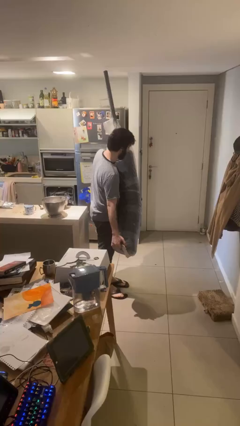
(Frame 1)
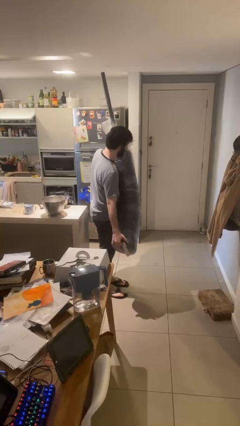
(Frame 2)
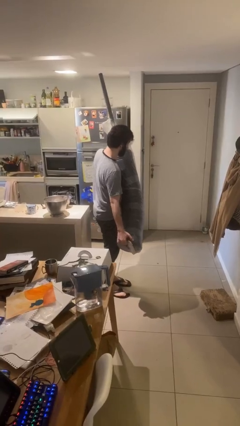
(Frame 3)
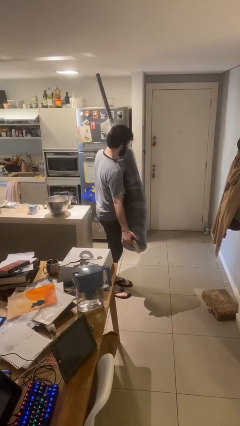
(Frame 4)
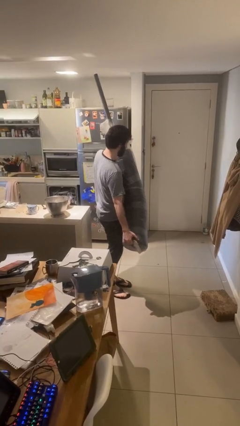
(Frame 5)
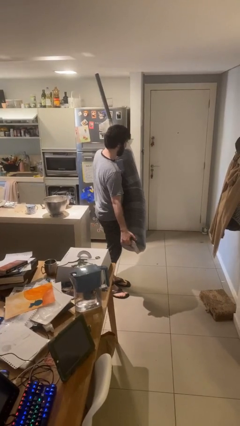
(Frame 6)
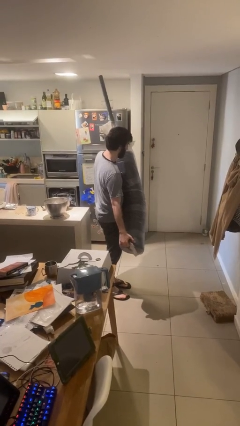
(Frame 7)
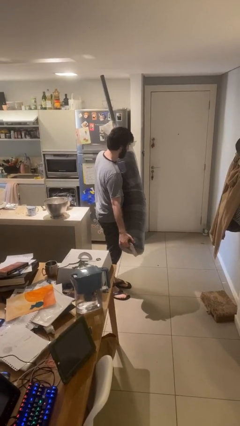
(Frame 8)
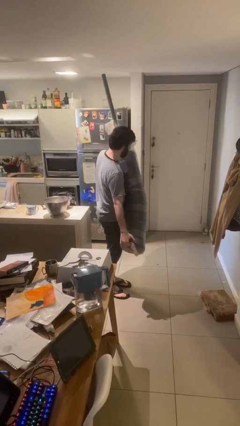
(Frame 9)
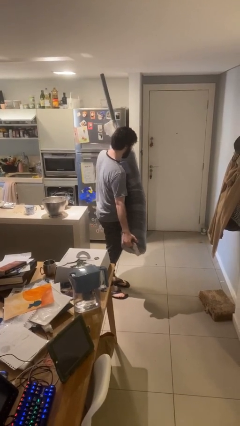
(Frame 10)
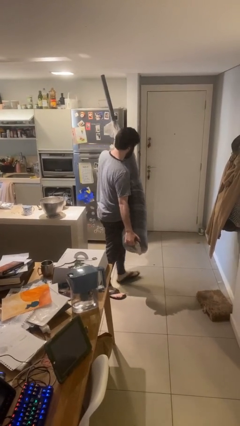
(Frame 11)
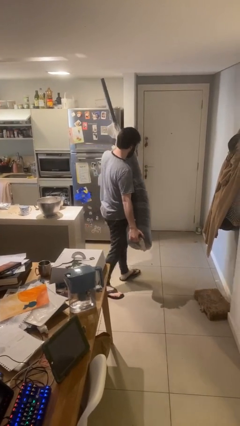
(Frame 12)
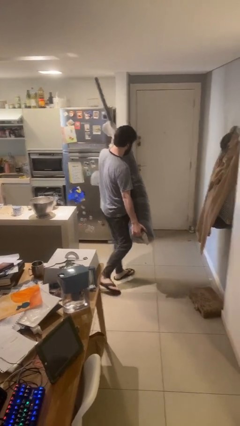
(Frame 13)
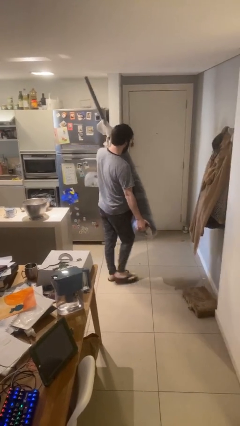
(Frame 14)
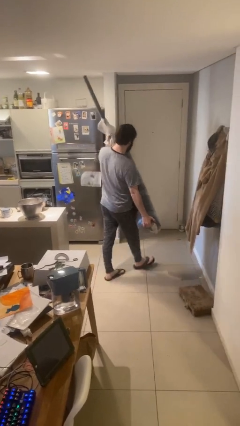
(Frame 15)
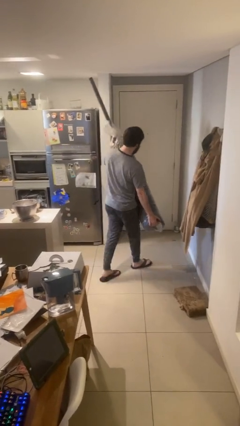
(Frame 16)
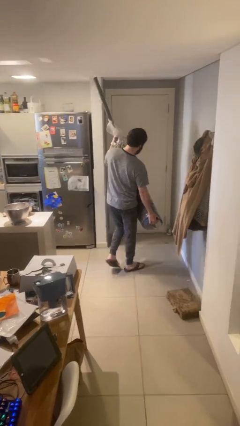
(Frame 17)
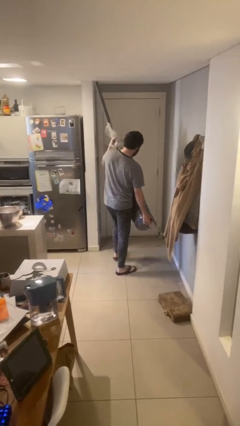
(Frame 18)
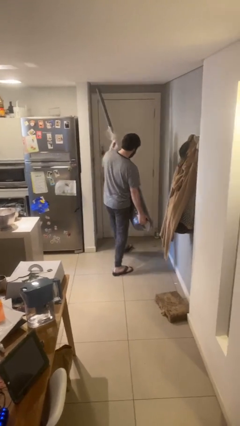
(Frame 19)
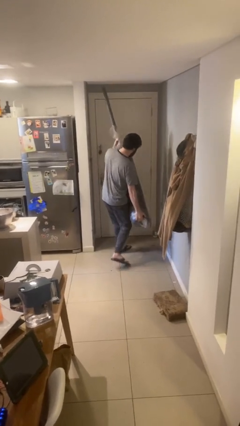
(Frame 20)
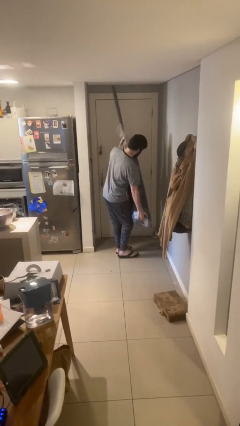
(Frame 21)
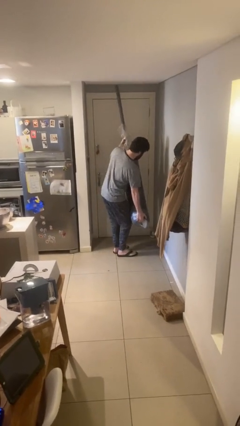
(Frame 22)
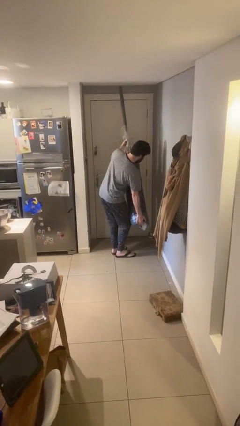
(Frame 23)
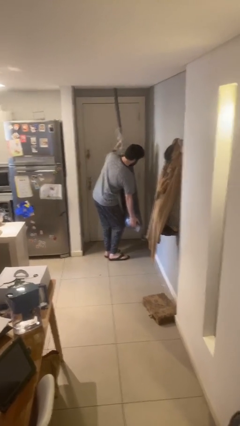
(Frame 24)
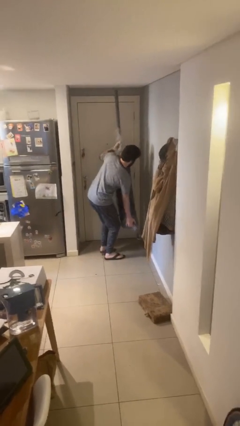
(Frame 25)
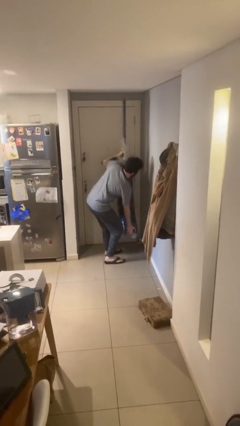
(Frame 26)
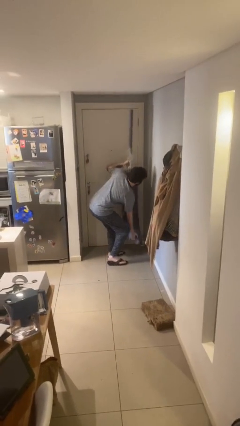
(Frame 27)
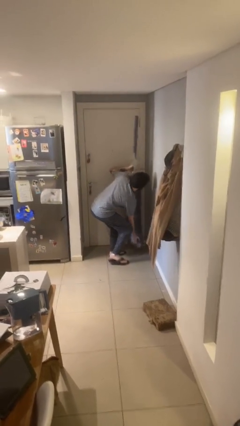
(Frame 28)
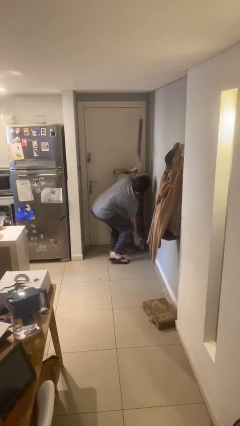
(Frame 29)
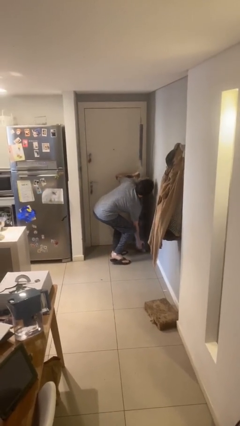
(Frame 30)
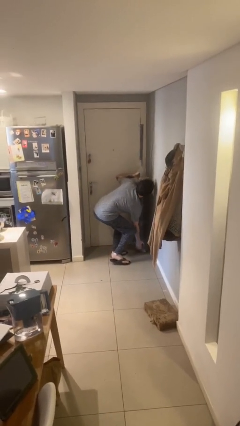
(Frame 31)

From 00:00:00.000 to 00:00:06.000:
person carries heavy object

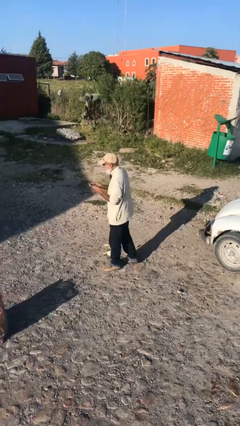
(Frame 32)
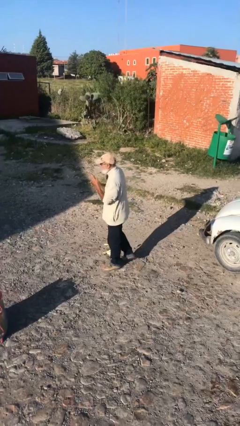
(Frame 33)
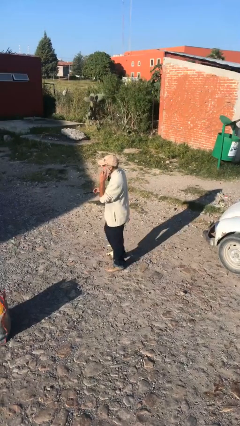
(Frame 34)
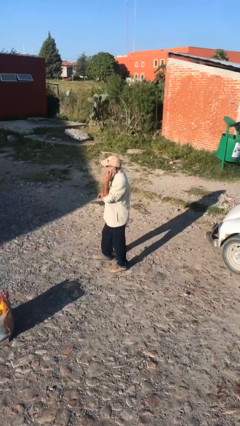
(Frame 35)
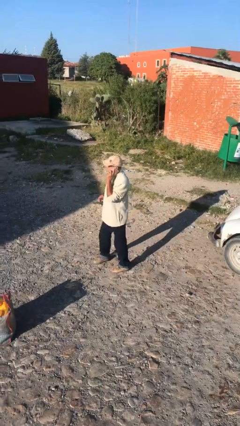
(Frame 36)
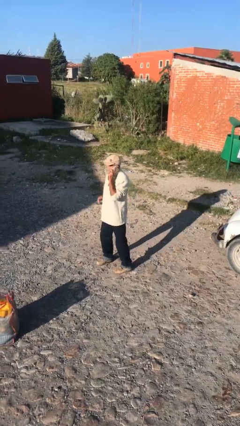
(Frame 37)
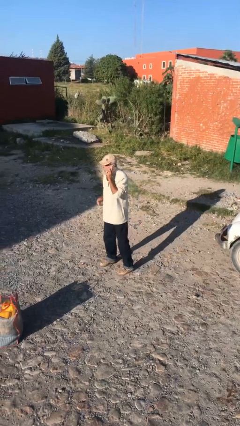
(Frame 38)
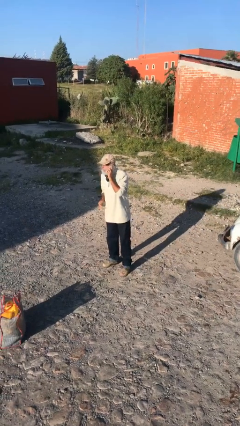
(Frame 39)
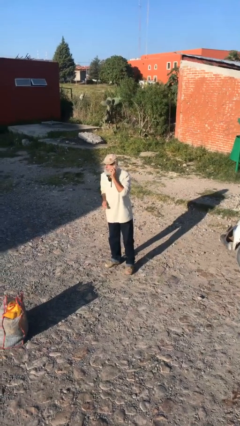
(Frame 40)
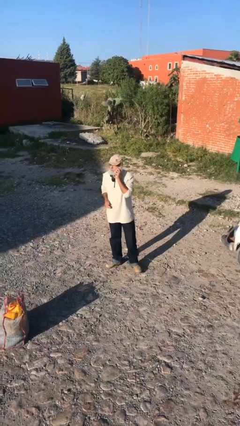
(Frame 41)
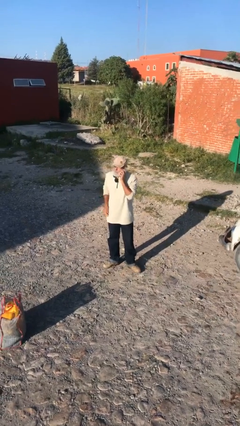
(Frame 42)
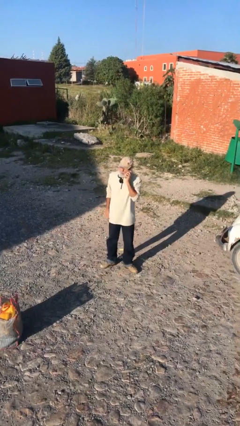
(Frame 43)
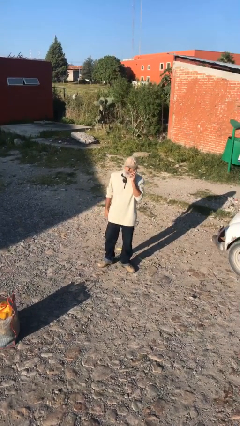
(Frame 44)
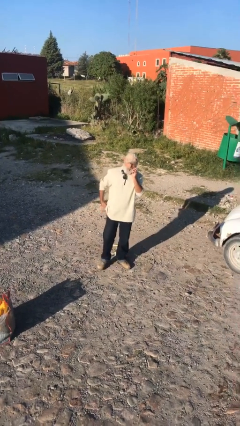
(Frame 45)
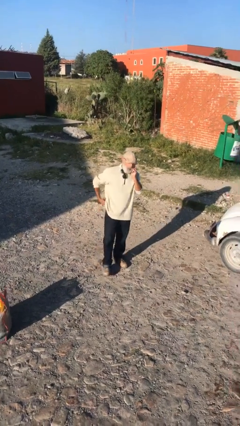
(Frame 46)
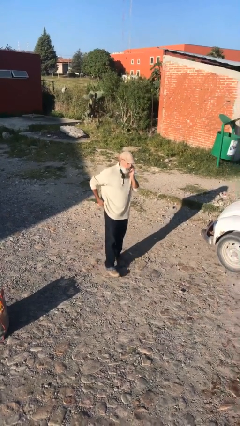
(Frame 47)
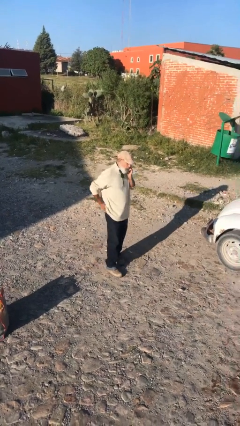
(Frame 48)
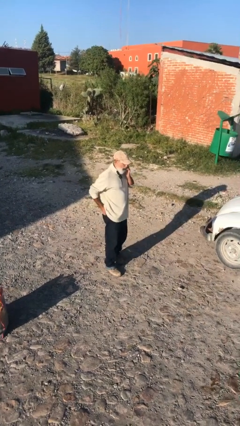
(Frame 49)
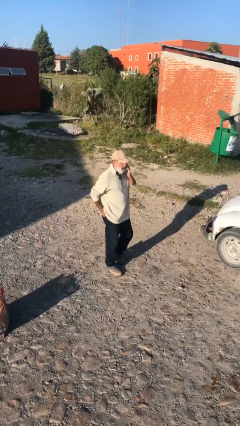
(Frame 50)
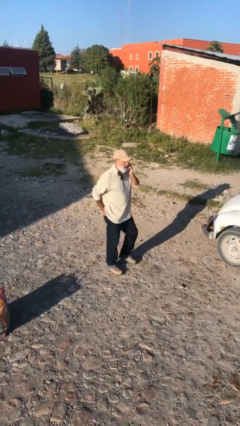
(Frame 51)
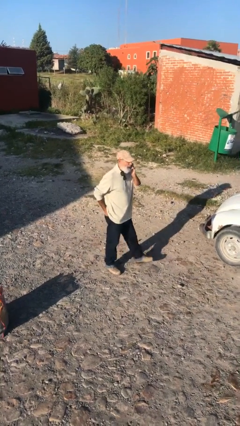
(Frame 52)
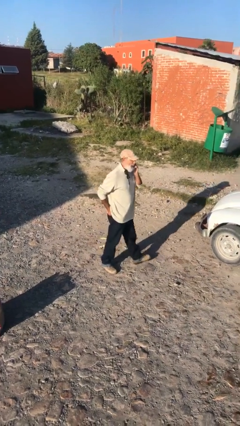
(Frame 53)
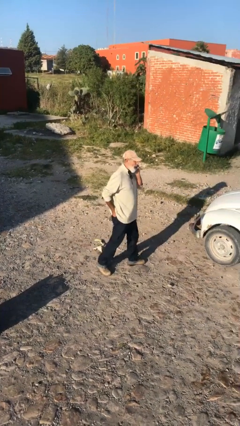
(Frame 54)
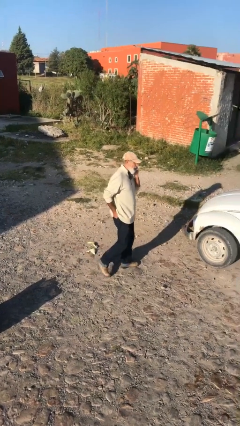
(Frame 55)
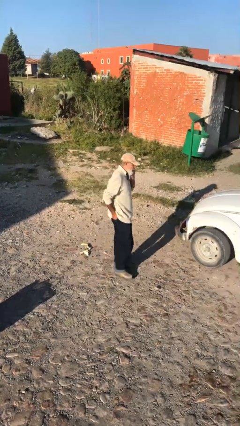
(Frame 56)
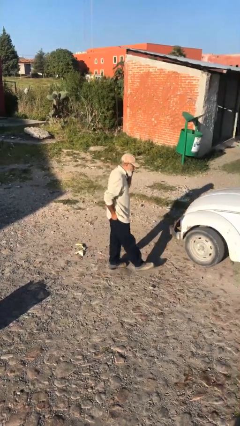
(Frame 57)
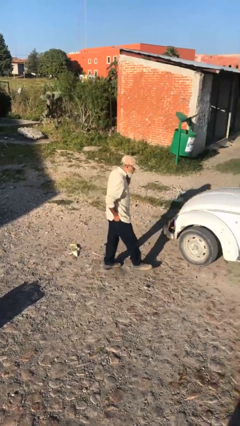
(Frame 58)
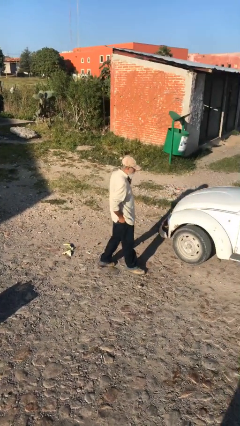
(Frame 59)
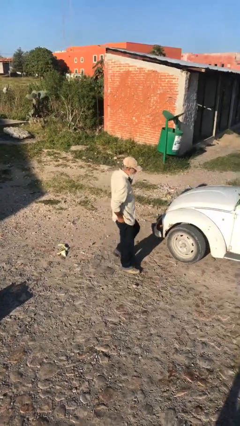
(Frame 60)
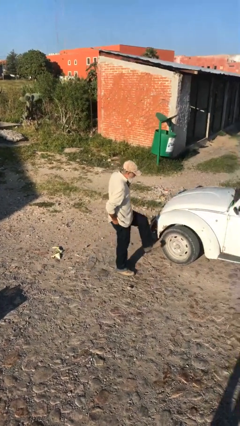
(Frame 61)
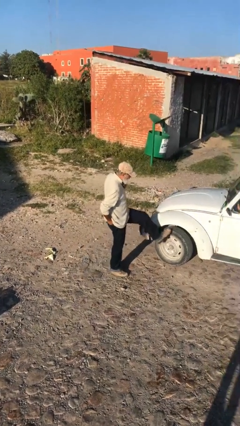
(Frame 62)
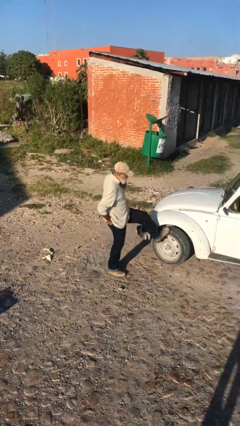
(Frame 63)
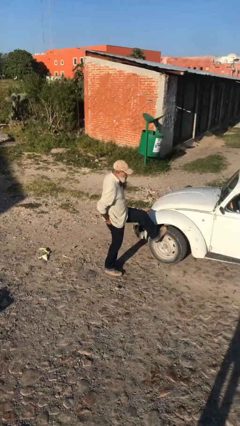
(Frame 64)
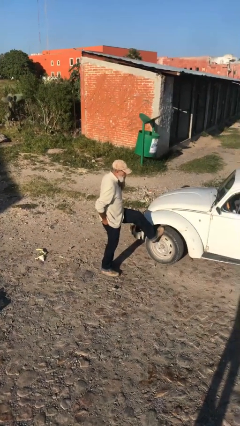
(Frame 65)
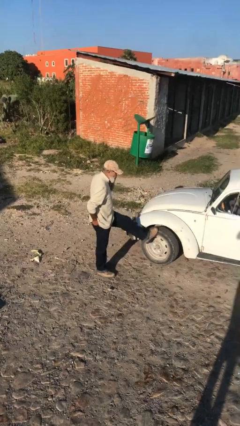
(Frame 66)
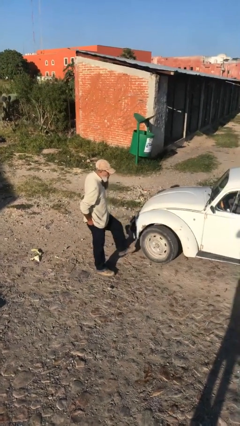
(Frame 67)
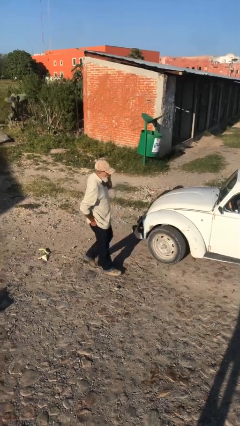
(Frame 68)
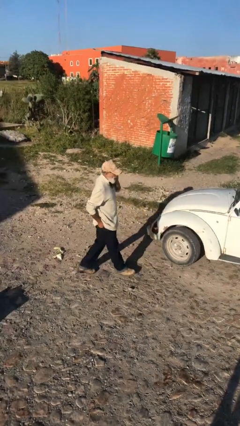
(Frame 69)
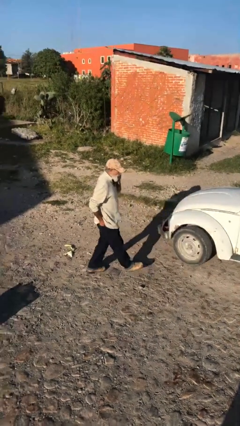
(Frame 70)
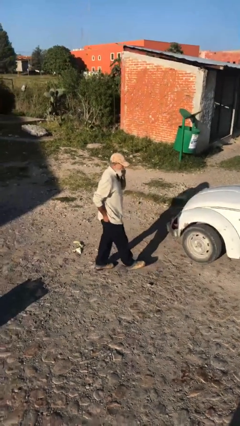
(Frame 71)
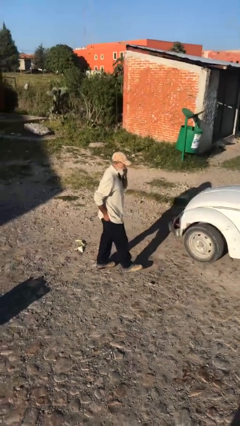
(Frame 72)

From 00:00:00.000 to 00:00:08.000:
person talks on phone

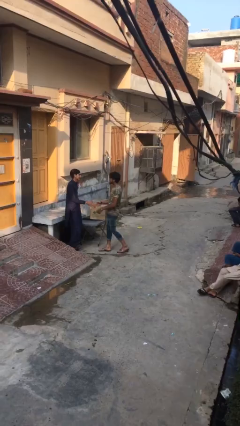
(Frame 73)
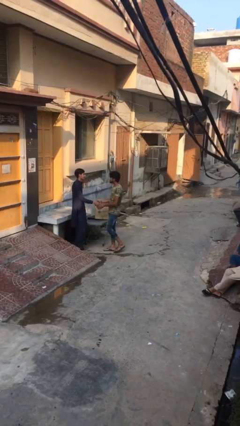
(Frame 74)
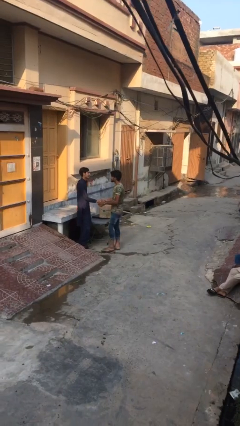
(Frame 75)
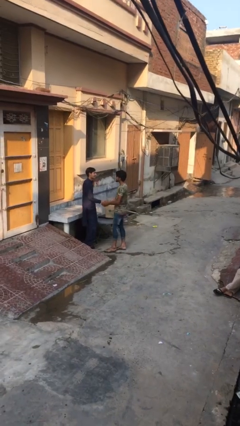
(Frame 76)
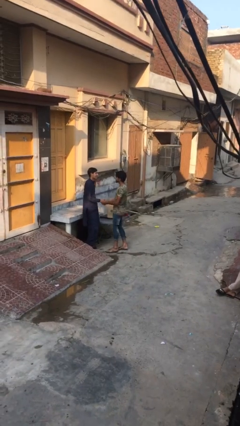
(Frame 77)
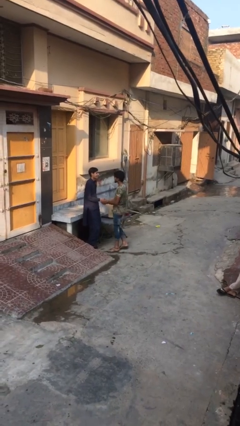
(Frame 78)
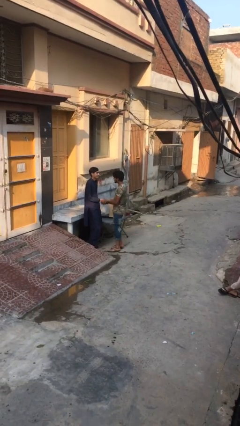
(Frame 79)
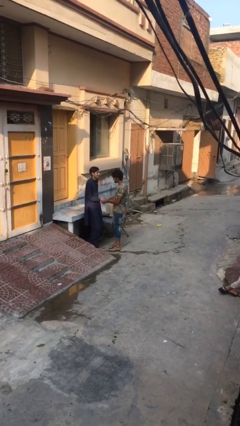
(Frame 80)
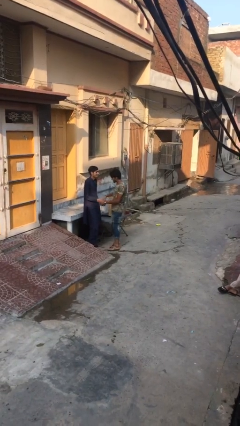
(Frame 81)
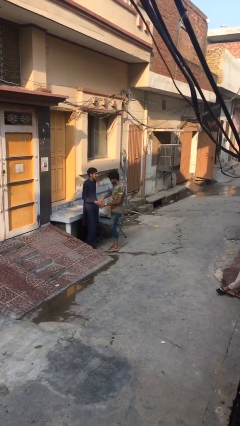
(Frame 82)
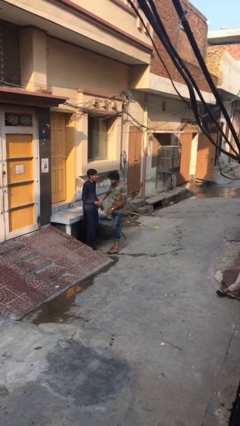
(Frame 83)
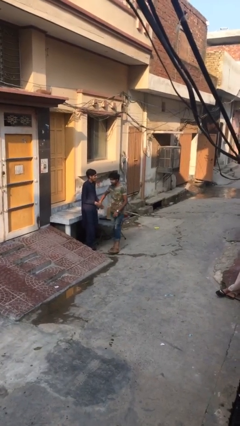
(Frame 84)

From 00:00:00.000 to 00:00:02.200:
person shakes hand

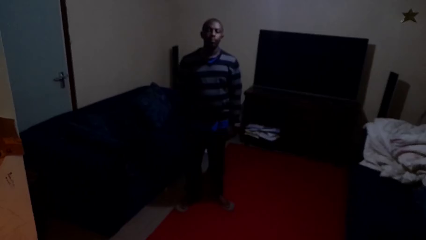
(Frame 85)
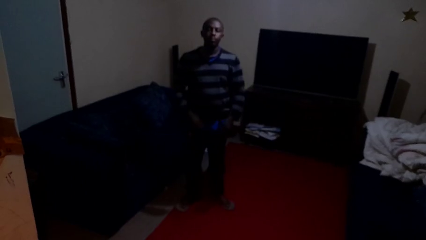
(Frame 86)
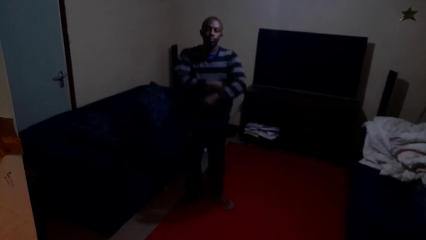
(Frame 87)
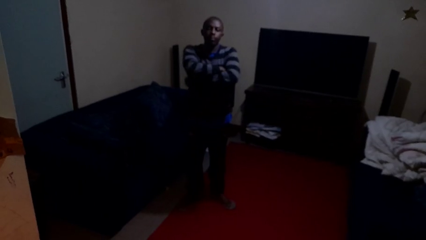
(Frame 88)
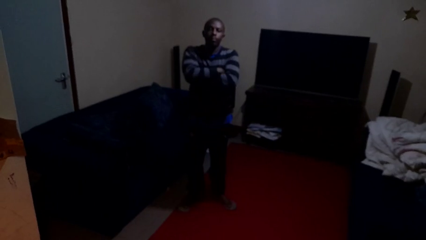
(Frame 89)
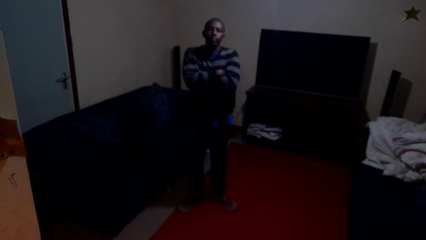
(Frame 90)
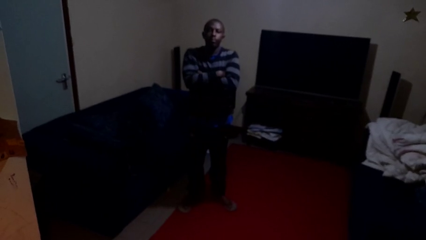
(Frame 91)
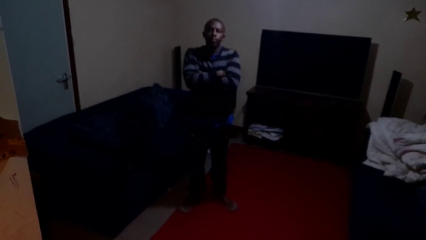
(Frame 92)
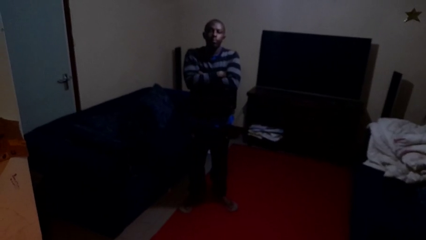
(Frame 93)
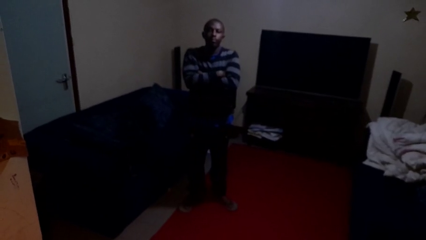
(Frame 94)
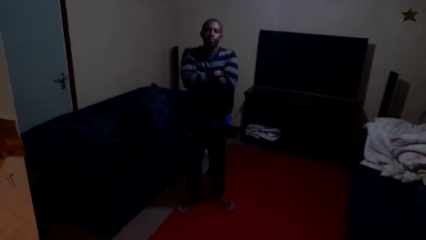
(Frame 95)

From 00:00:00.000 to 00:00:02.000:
person crosses arms
